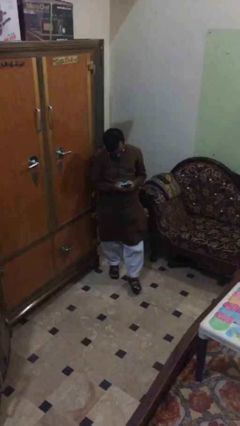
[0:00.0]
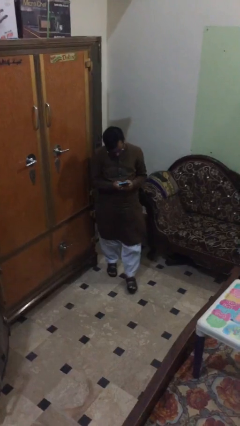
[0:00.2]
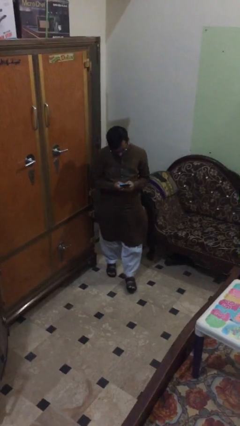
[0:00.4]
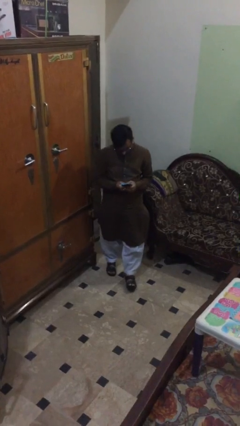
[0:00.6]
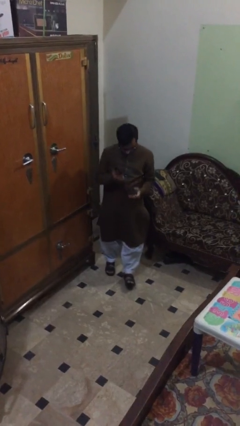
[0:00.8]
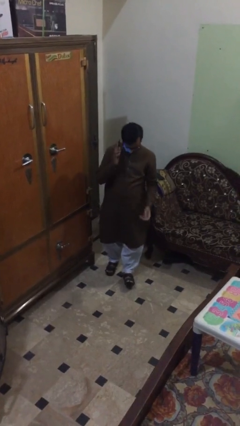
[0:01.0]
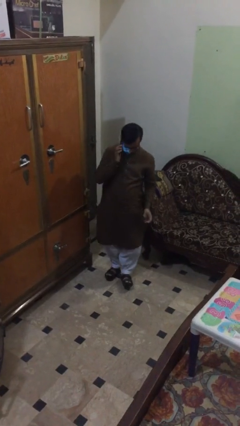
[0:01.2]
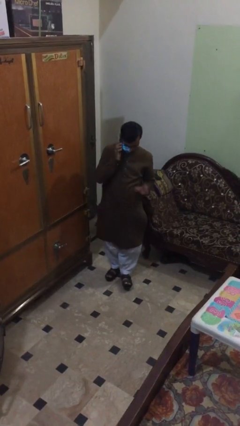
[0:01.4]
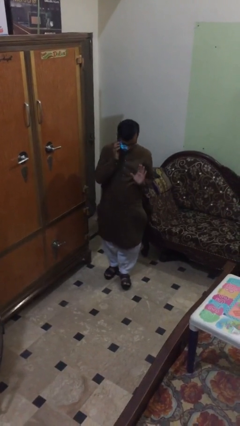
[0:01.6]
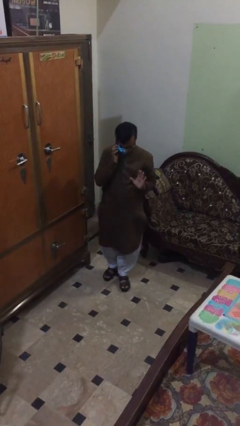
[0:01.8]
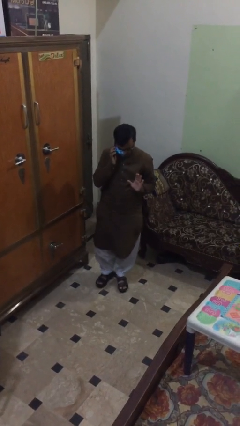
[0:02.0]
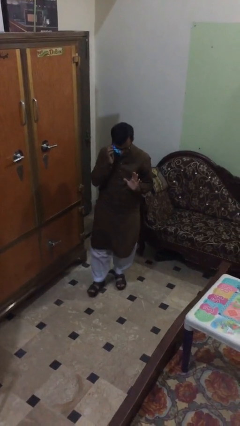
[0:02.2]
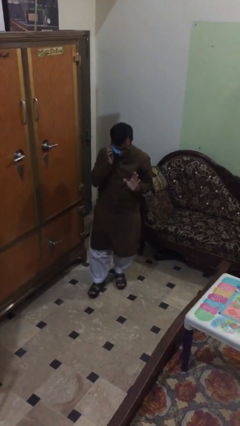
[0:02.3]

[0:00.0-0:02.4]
person talks on phone

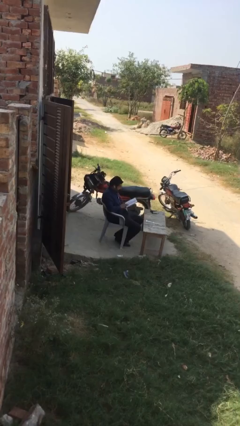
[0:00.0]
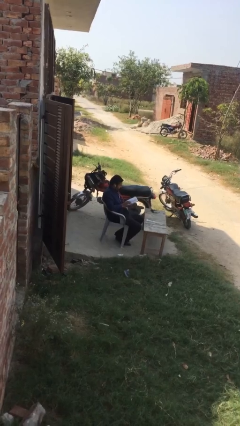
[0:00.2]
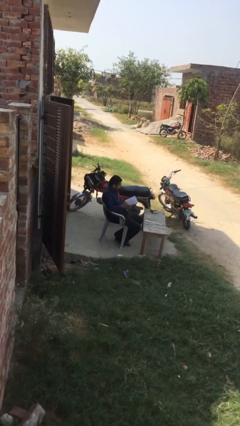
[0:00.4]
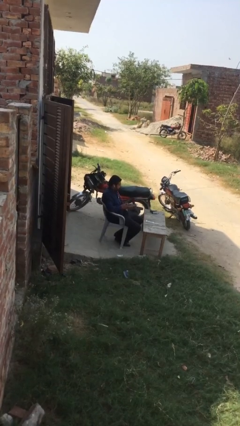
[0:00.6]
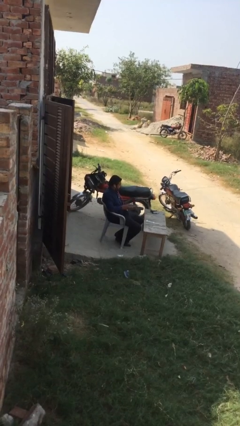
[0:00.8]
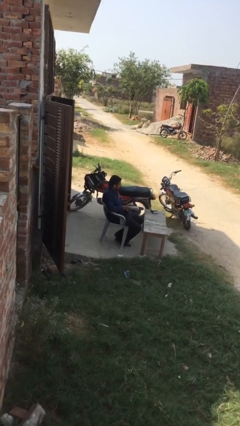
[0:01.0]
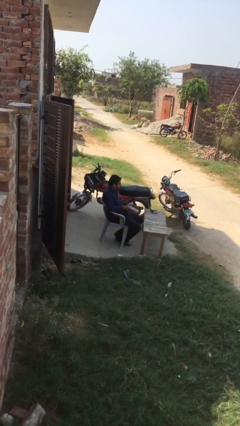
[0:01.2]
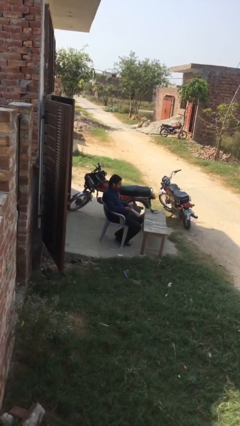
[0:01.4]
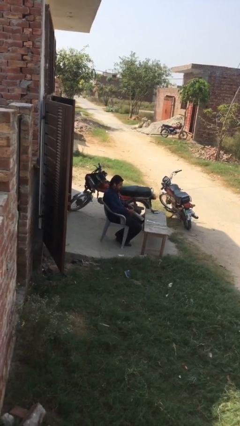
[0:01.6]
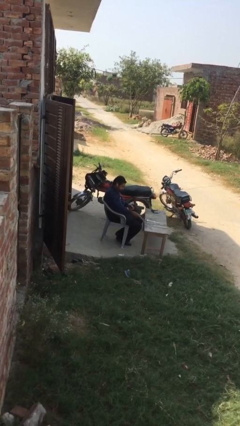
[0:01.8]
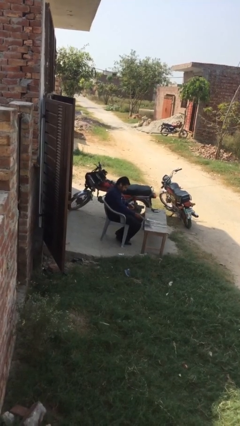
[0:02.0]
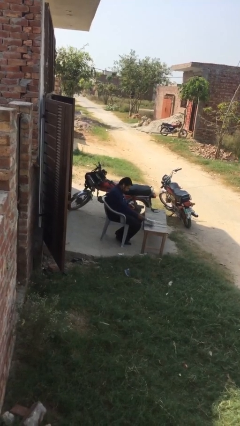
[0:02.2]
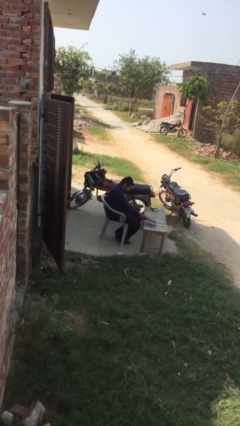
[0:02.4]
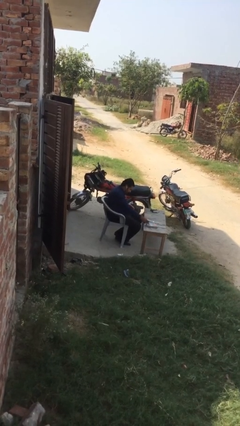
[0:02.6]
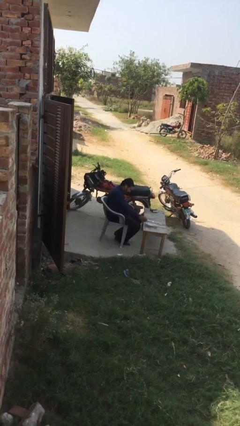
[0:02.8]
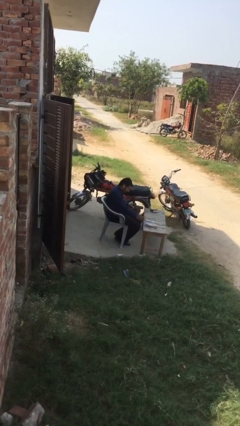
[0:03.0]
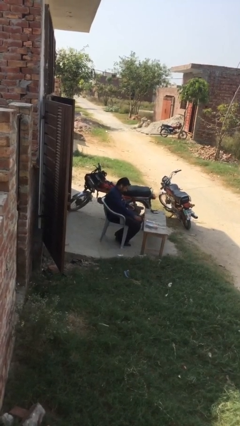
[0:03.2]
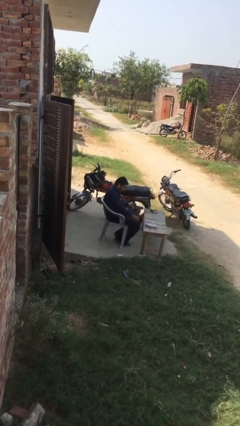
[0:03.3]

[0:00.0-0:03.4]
person puts down object on table

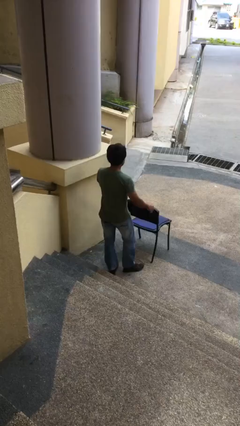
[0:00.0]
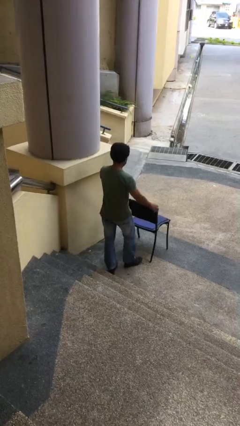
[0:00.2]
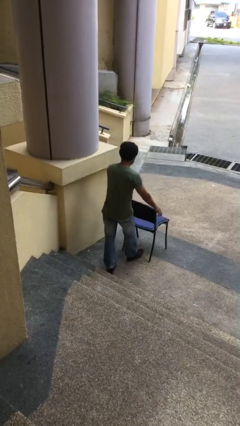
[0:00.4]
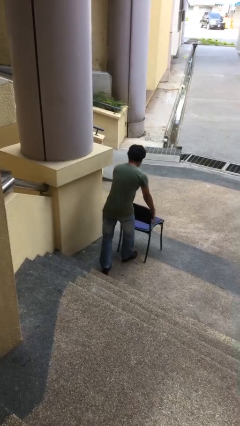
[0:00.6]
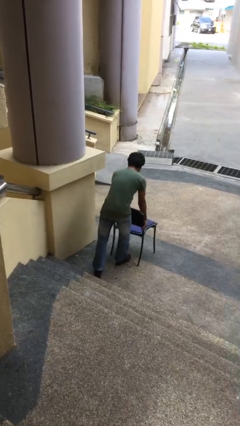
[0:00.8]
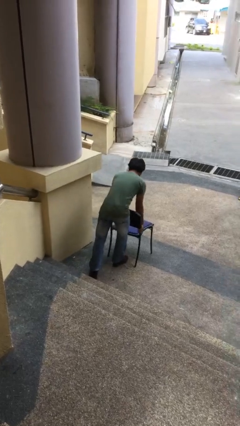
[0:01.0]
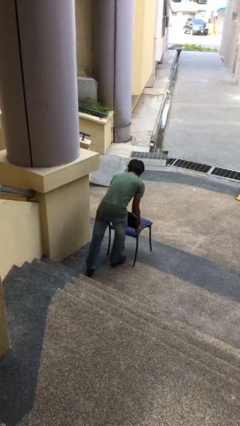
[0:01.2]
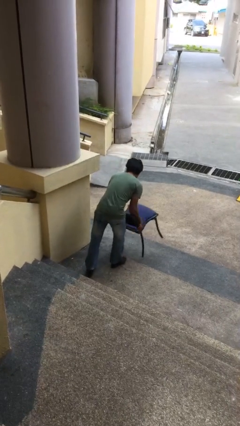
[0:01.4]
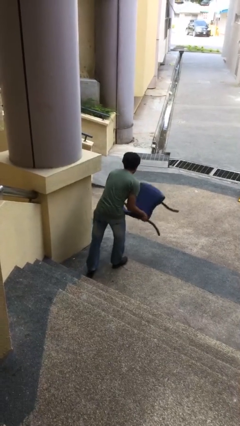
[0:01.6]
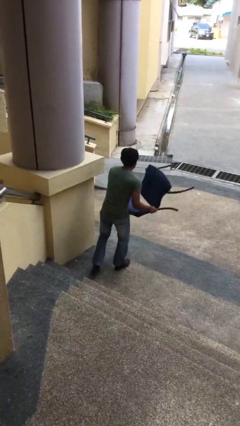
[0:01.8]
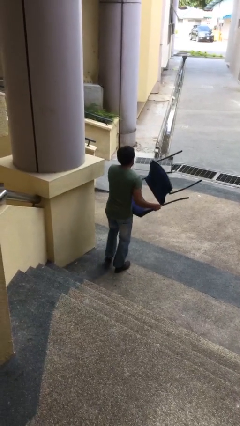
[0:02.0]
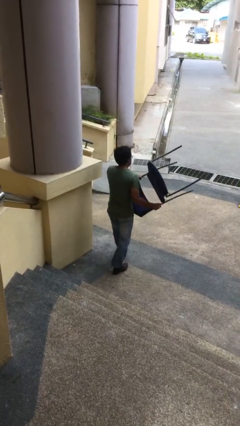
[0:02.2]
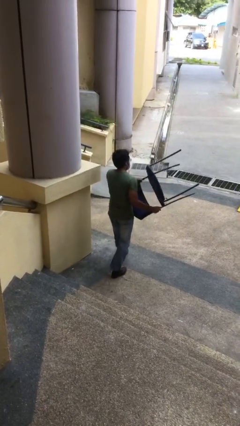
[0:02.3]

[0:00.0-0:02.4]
person picks up object from floor

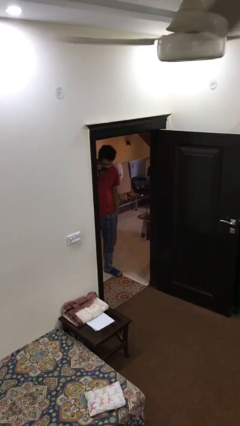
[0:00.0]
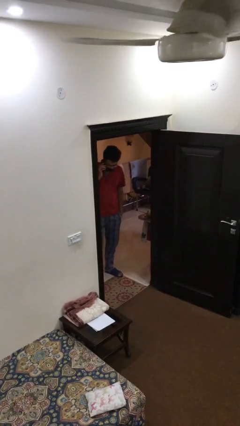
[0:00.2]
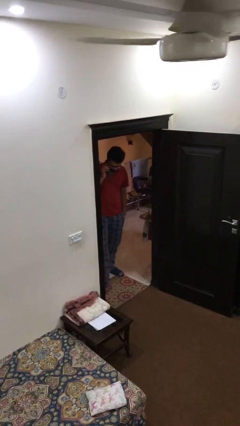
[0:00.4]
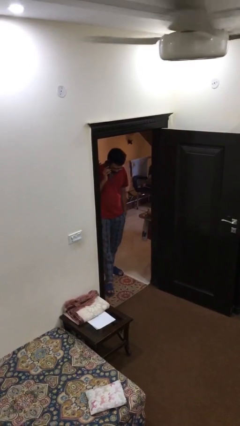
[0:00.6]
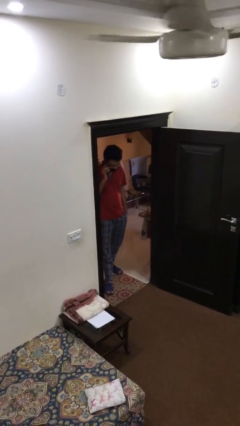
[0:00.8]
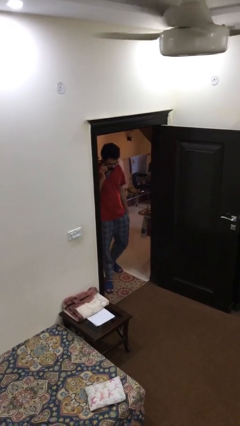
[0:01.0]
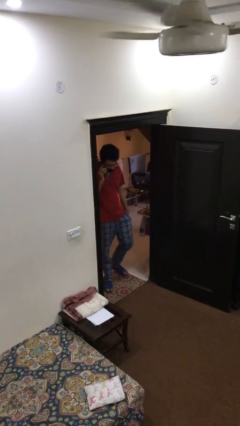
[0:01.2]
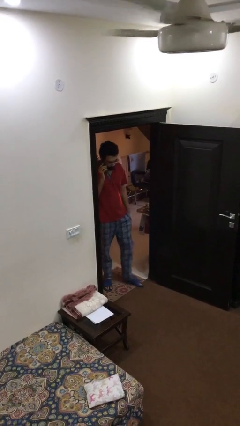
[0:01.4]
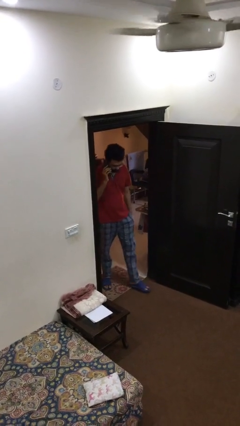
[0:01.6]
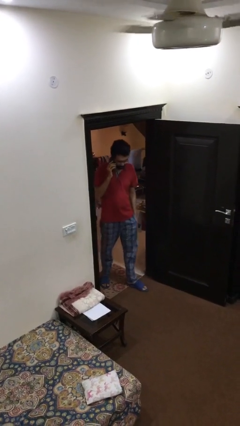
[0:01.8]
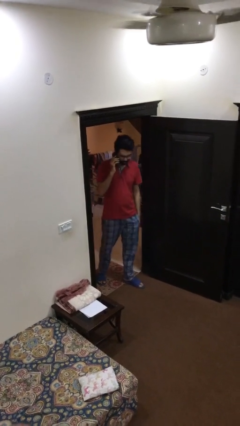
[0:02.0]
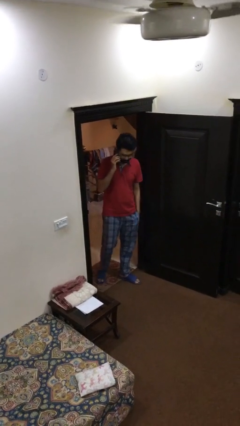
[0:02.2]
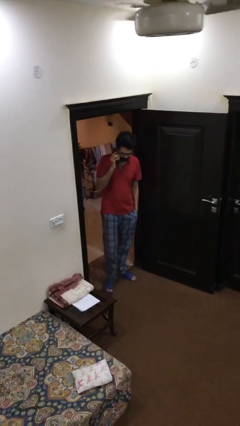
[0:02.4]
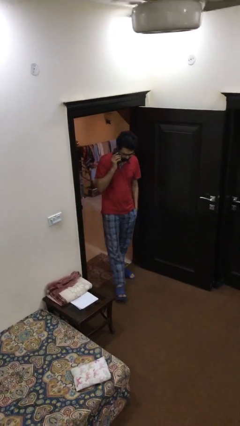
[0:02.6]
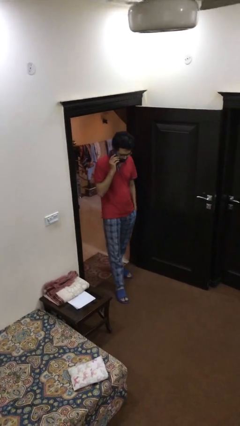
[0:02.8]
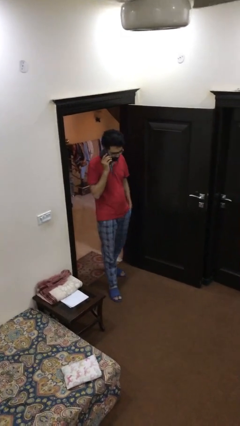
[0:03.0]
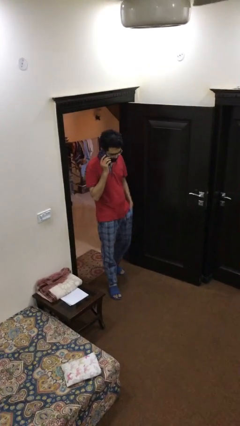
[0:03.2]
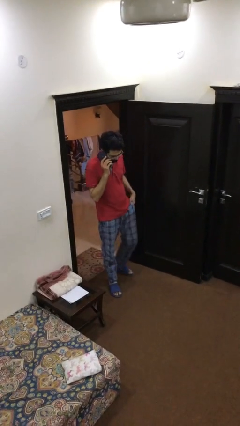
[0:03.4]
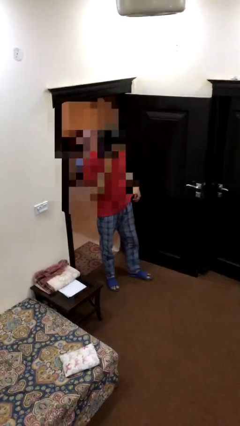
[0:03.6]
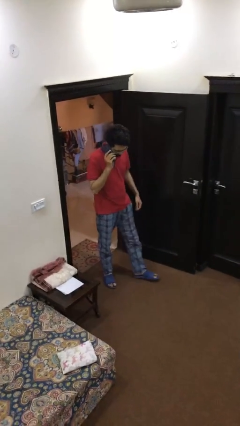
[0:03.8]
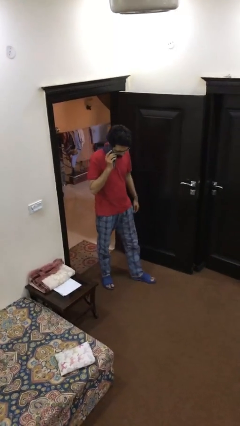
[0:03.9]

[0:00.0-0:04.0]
person enters scene through structure

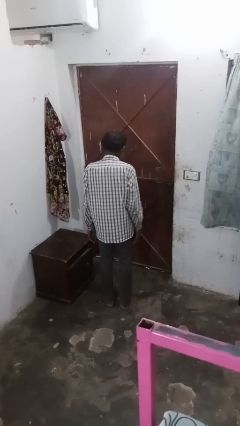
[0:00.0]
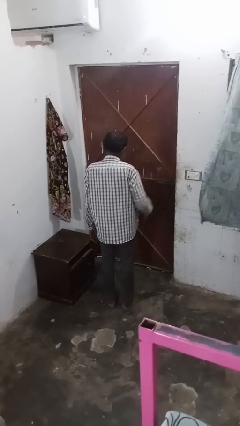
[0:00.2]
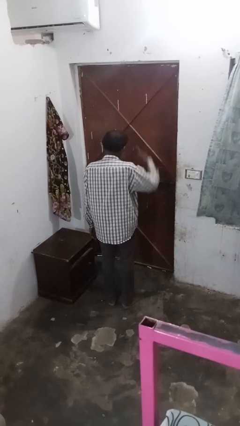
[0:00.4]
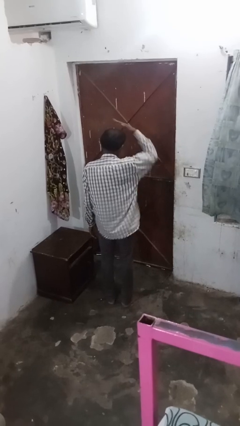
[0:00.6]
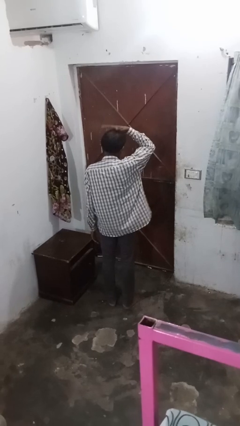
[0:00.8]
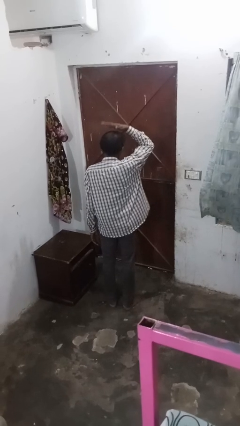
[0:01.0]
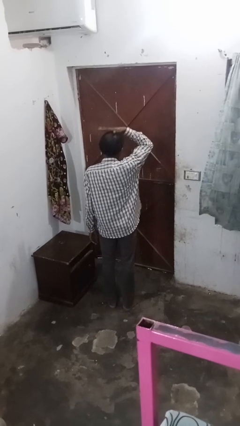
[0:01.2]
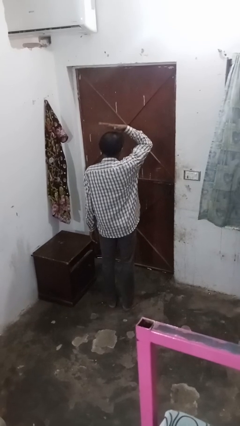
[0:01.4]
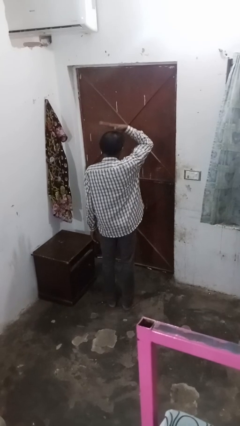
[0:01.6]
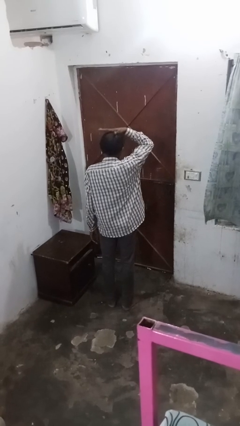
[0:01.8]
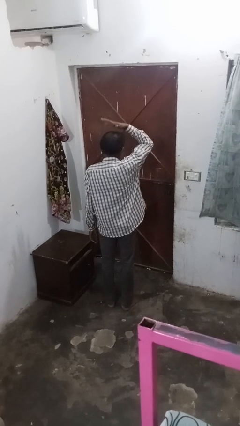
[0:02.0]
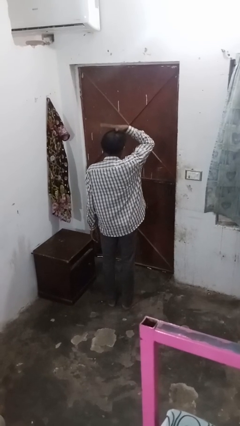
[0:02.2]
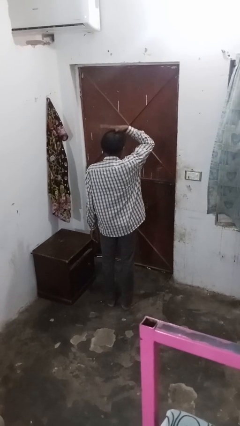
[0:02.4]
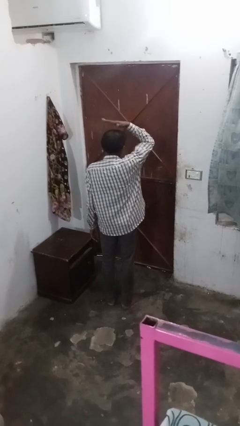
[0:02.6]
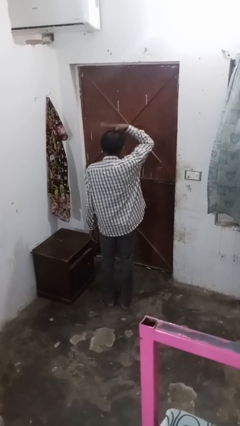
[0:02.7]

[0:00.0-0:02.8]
person pats head

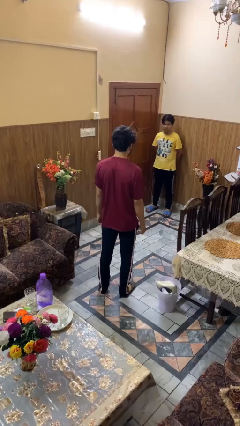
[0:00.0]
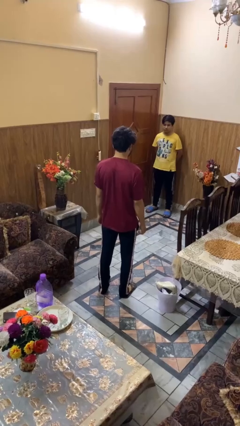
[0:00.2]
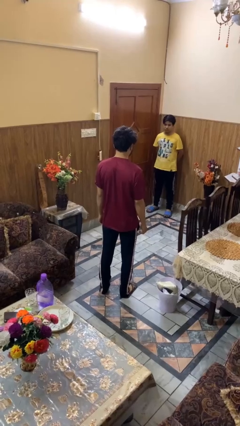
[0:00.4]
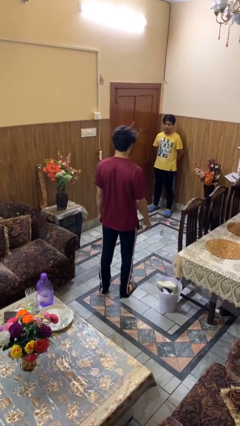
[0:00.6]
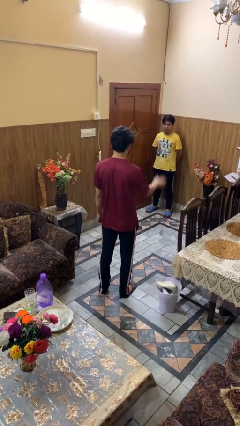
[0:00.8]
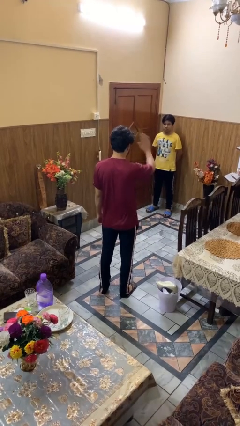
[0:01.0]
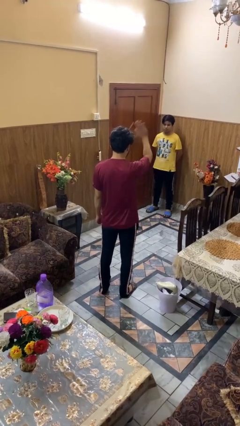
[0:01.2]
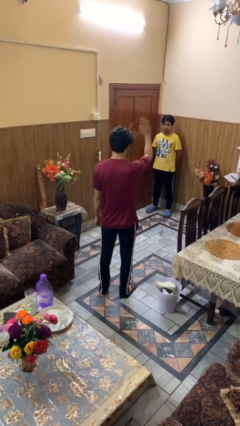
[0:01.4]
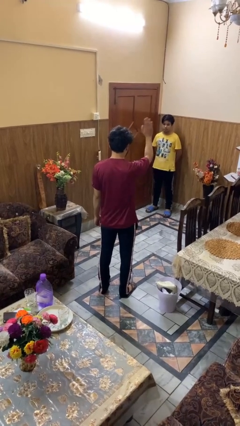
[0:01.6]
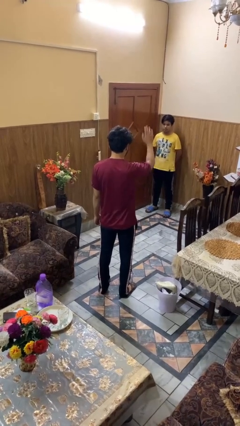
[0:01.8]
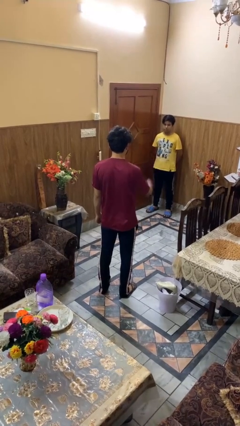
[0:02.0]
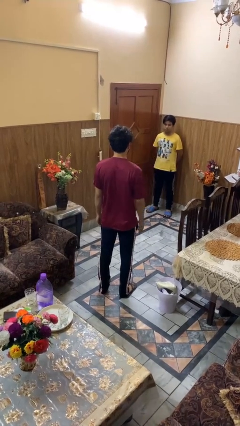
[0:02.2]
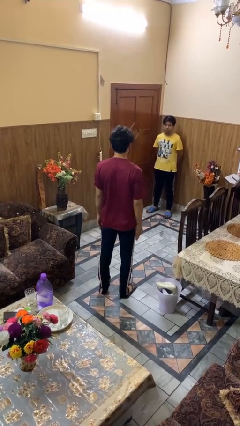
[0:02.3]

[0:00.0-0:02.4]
person waves at person
